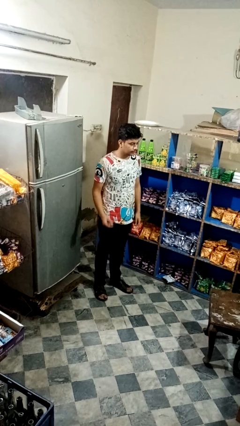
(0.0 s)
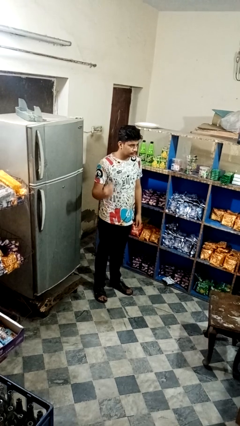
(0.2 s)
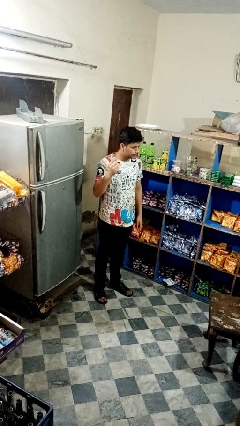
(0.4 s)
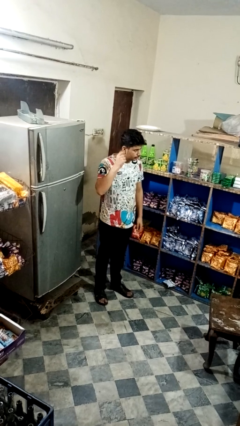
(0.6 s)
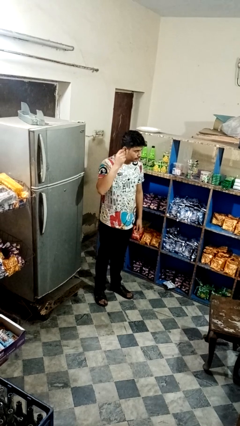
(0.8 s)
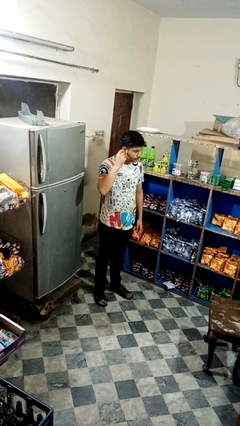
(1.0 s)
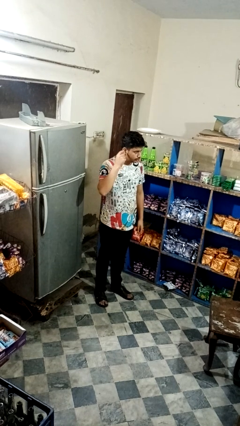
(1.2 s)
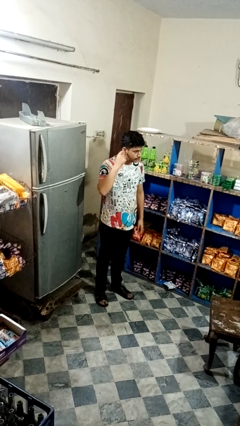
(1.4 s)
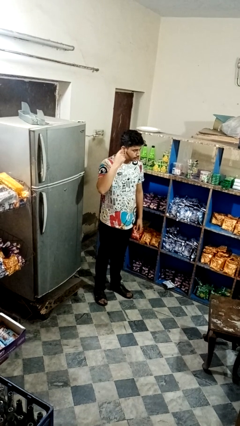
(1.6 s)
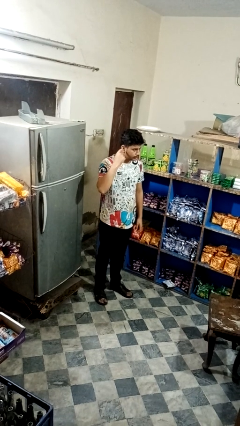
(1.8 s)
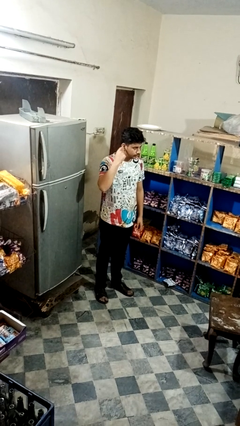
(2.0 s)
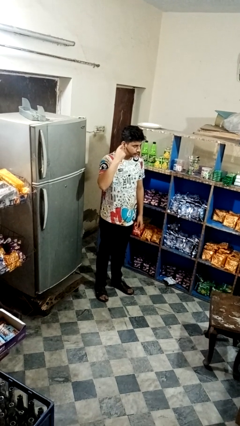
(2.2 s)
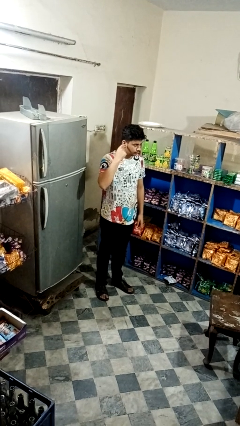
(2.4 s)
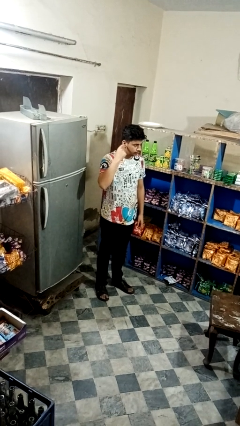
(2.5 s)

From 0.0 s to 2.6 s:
person gestures listen closely

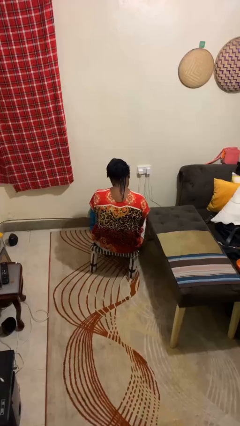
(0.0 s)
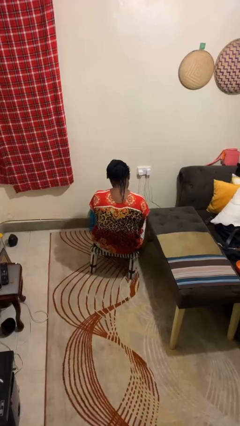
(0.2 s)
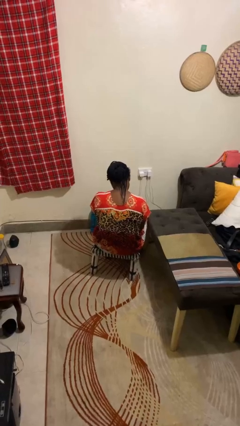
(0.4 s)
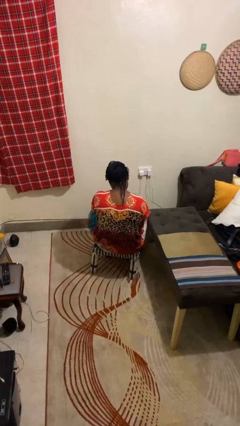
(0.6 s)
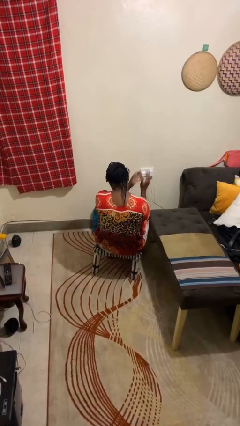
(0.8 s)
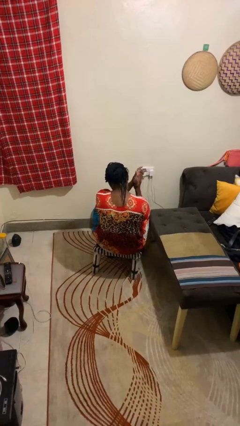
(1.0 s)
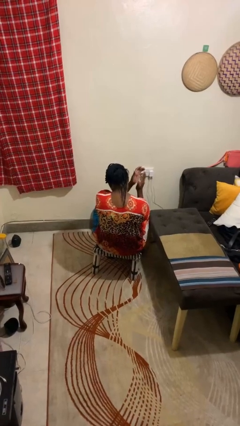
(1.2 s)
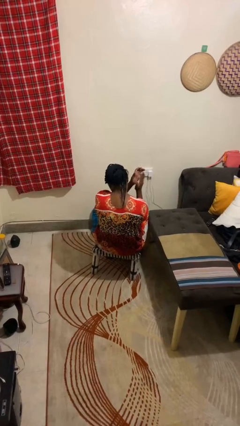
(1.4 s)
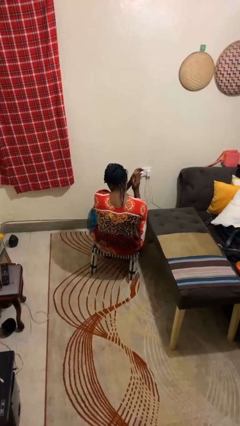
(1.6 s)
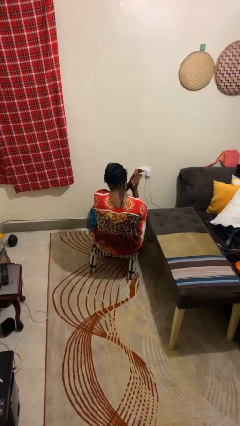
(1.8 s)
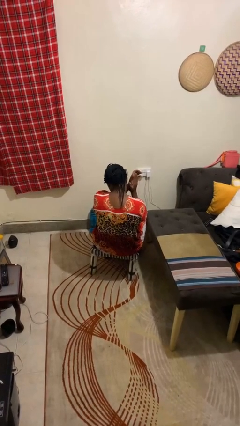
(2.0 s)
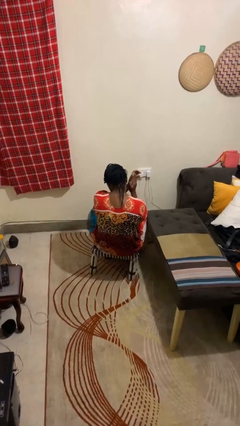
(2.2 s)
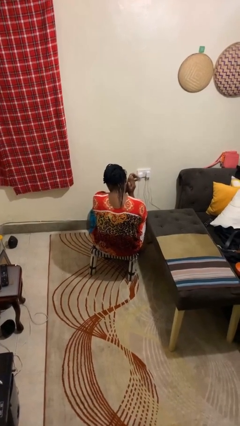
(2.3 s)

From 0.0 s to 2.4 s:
person claps hands

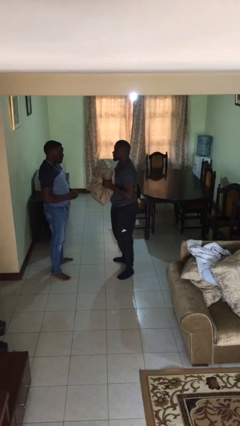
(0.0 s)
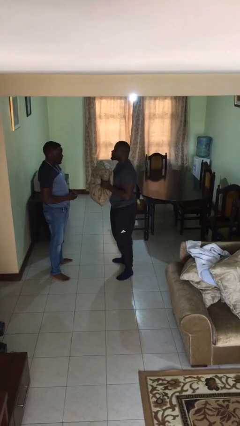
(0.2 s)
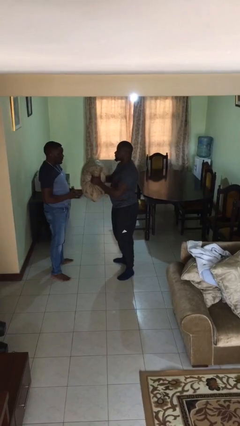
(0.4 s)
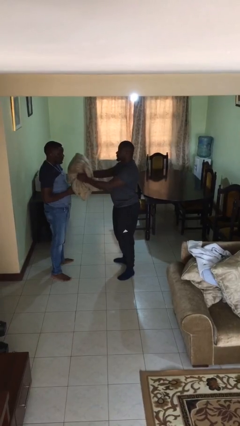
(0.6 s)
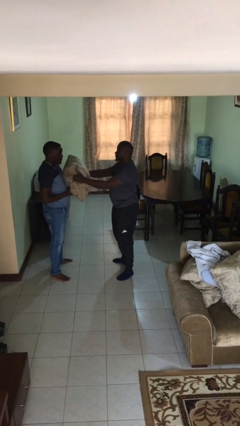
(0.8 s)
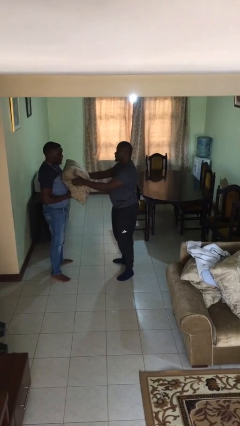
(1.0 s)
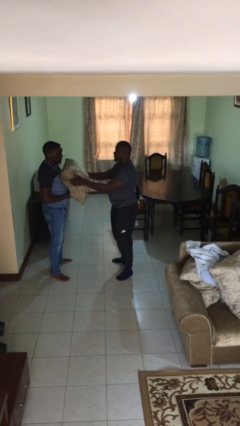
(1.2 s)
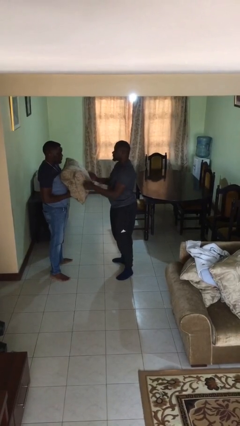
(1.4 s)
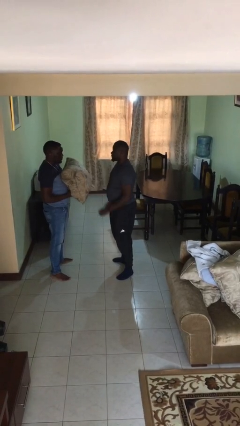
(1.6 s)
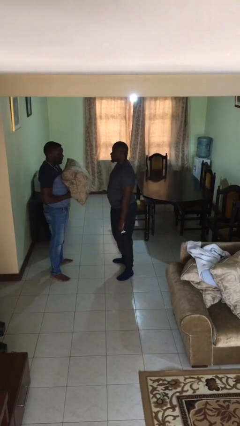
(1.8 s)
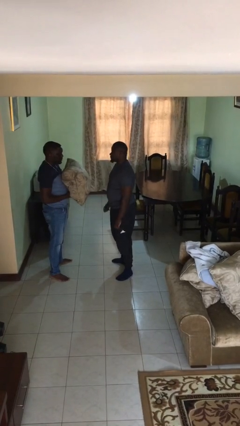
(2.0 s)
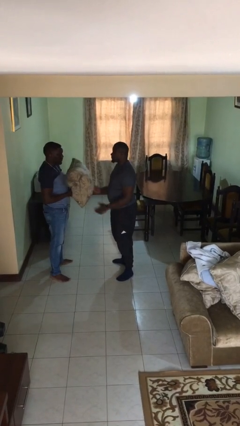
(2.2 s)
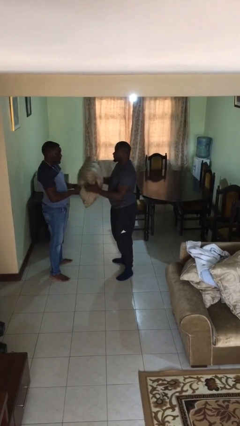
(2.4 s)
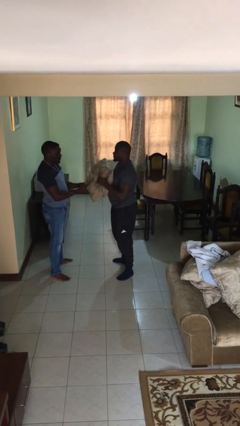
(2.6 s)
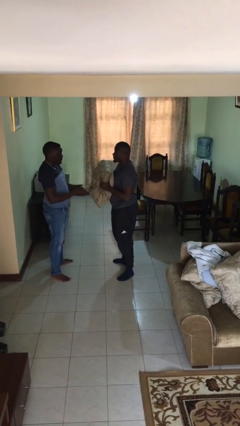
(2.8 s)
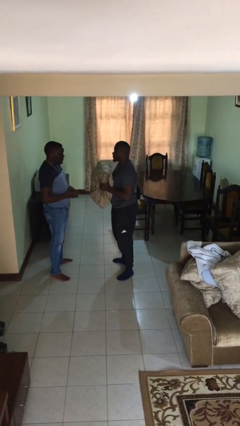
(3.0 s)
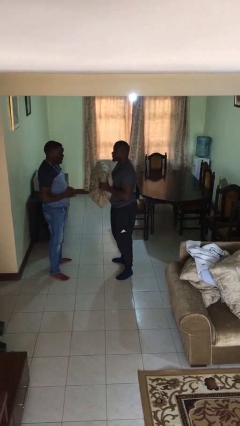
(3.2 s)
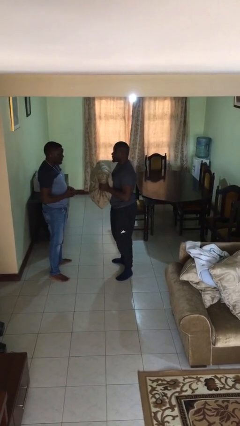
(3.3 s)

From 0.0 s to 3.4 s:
person transfers object to person

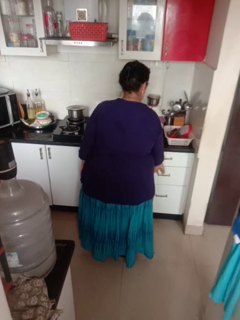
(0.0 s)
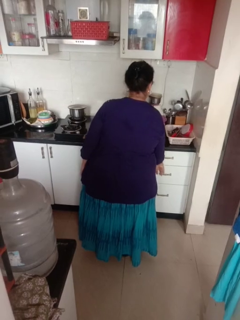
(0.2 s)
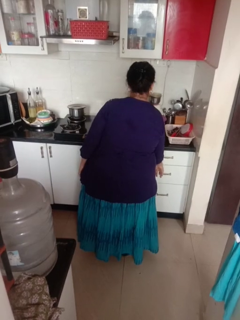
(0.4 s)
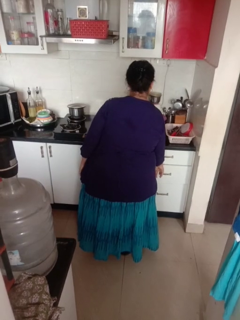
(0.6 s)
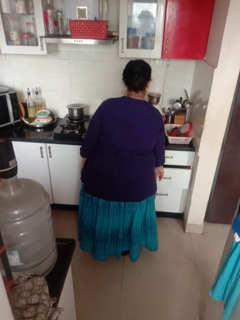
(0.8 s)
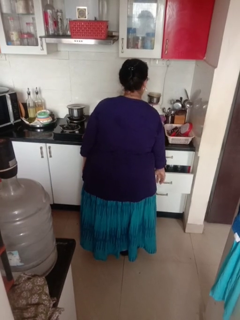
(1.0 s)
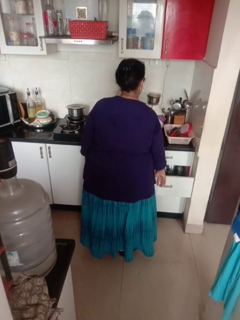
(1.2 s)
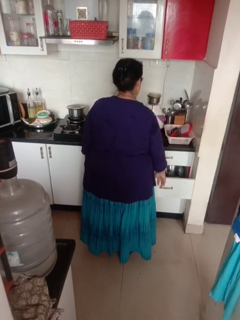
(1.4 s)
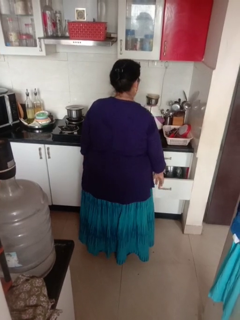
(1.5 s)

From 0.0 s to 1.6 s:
person opens kitchen drawer

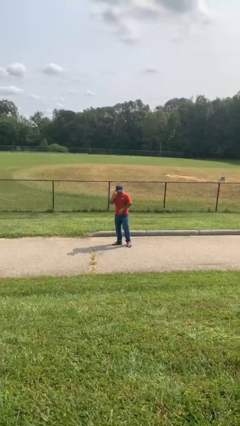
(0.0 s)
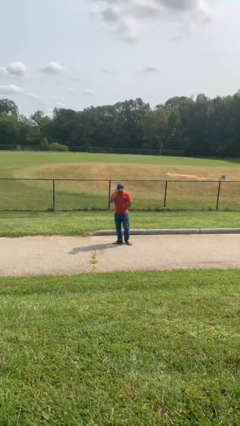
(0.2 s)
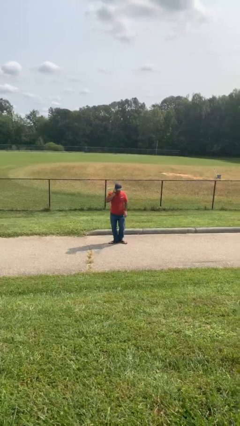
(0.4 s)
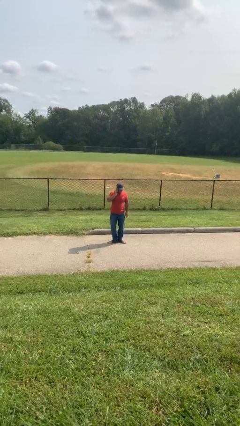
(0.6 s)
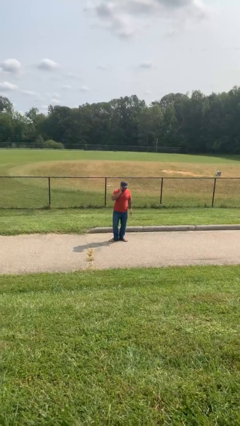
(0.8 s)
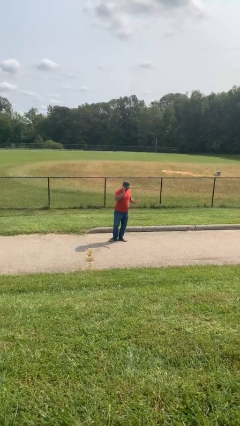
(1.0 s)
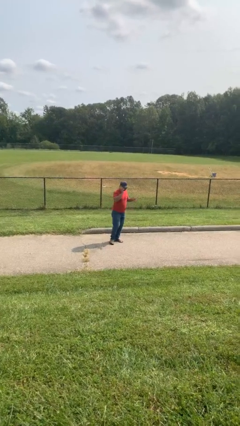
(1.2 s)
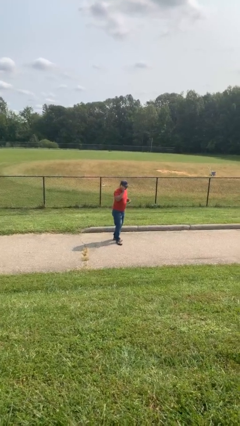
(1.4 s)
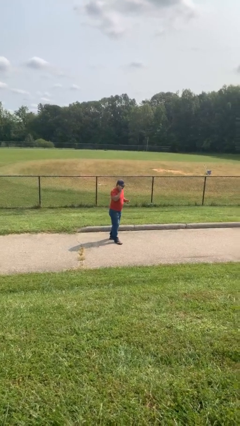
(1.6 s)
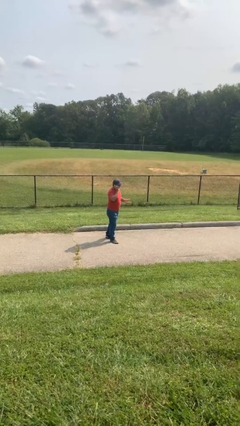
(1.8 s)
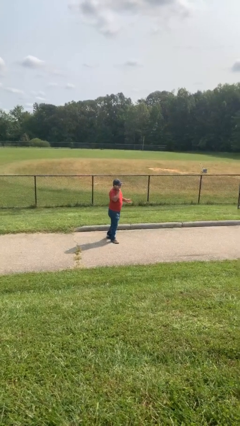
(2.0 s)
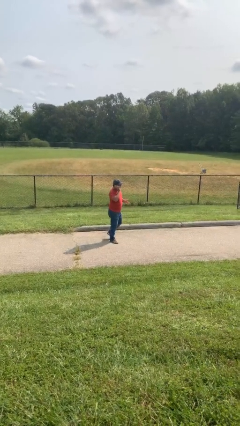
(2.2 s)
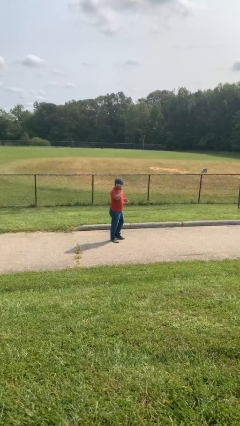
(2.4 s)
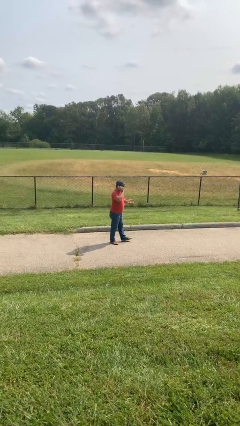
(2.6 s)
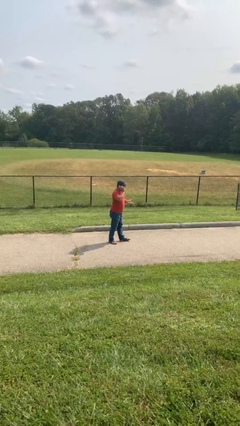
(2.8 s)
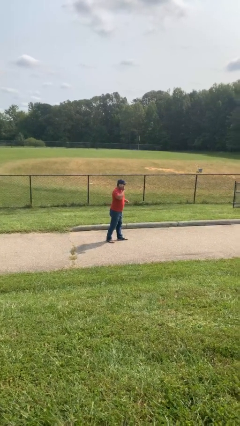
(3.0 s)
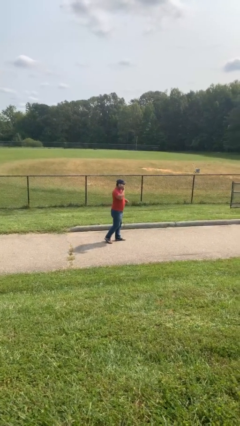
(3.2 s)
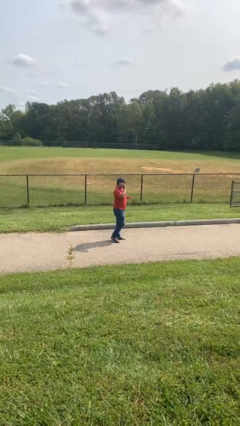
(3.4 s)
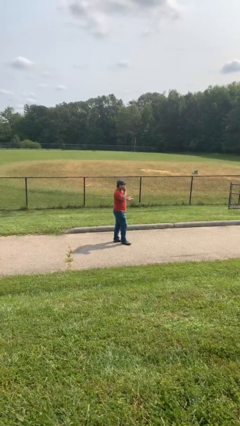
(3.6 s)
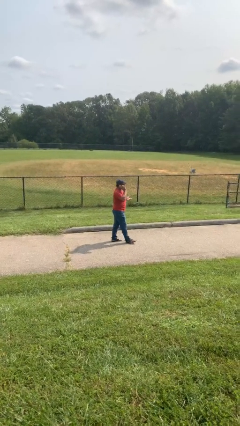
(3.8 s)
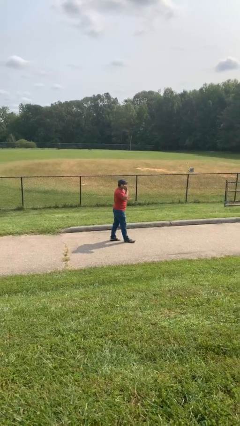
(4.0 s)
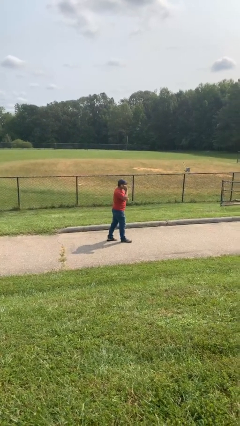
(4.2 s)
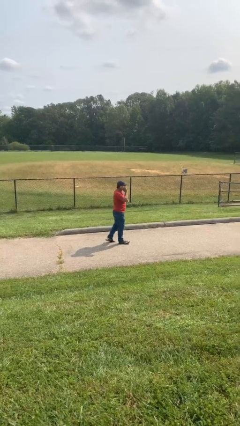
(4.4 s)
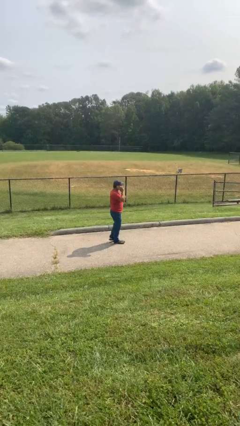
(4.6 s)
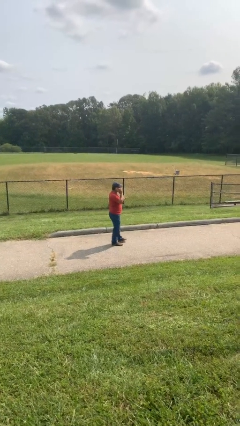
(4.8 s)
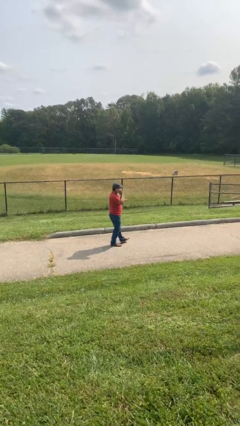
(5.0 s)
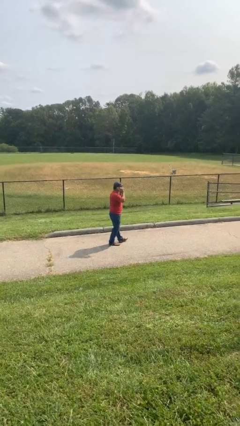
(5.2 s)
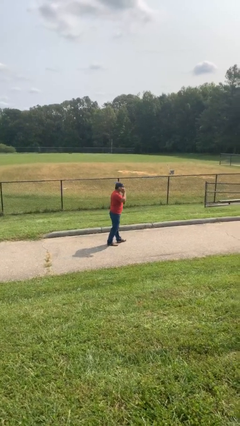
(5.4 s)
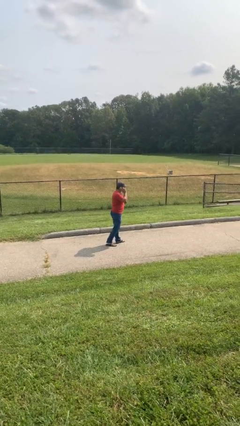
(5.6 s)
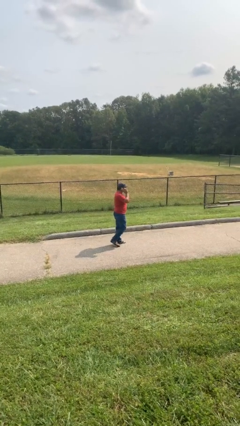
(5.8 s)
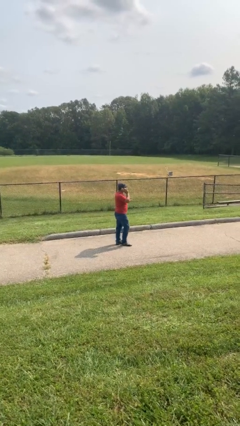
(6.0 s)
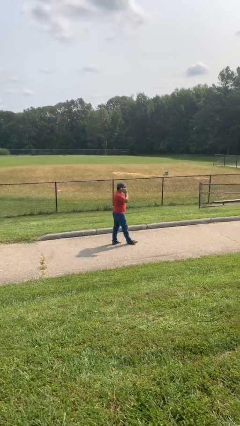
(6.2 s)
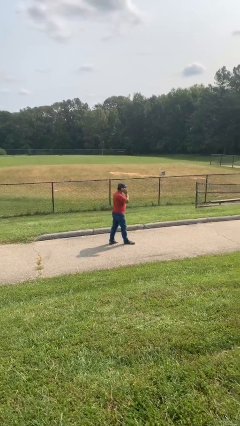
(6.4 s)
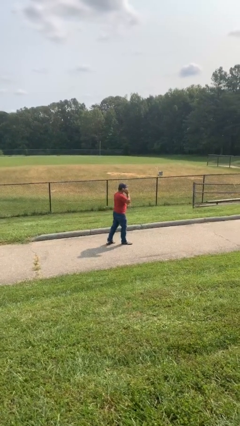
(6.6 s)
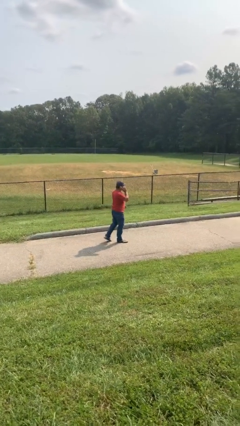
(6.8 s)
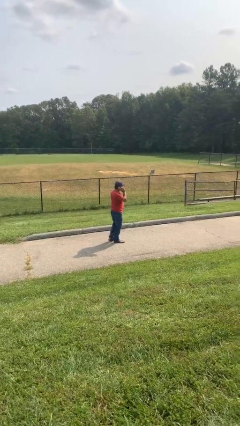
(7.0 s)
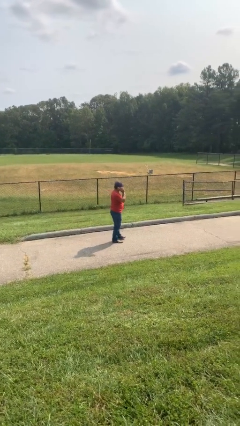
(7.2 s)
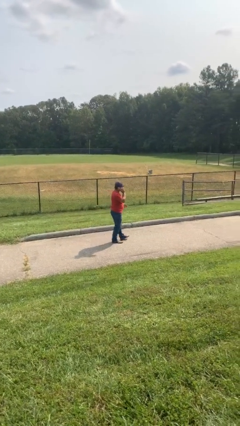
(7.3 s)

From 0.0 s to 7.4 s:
person talks on phone

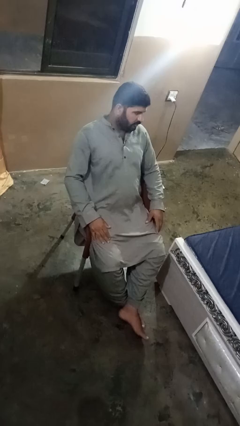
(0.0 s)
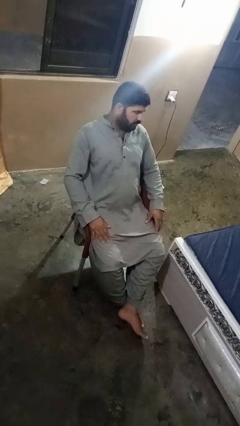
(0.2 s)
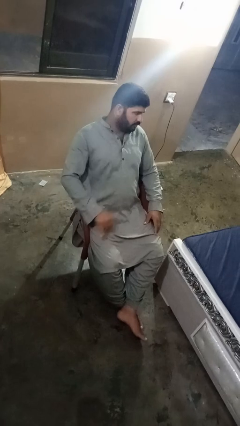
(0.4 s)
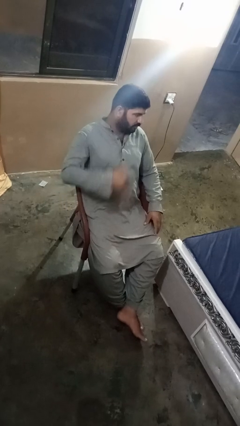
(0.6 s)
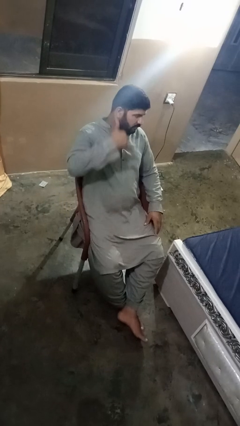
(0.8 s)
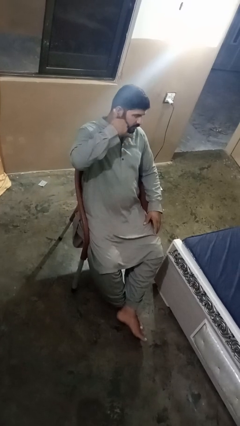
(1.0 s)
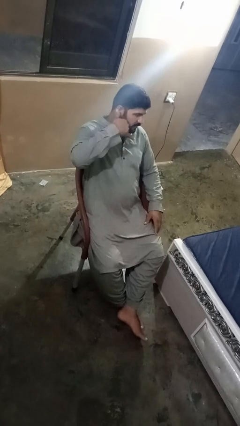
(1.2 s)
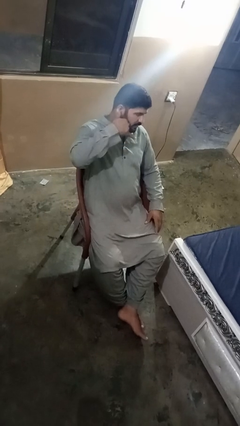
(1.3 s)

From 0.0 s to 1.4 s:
person gestures call me
